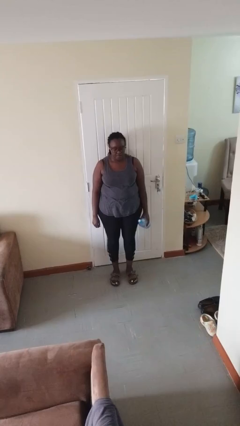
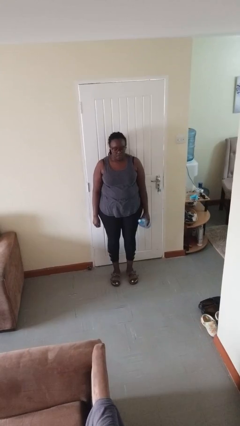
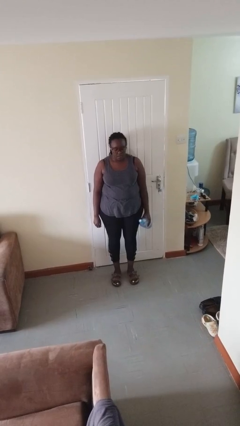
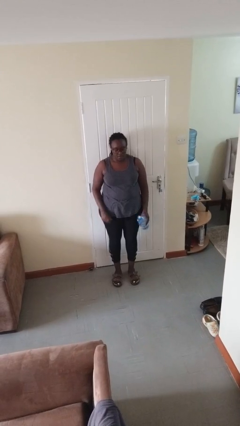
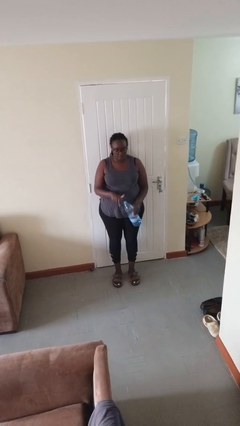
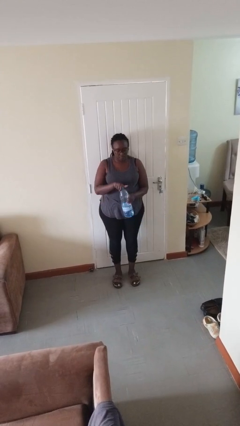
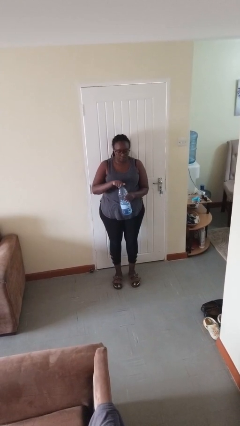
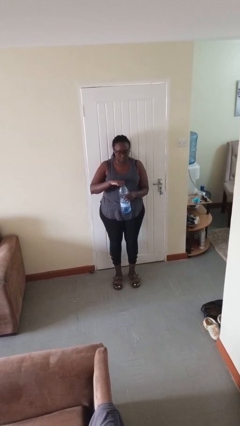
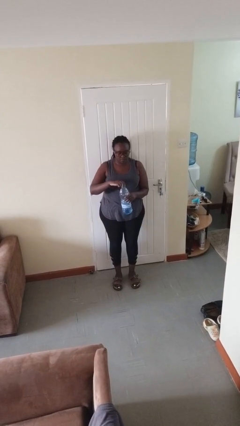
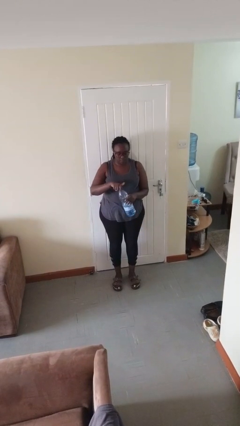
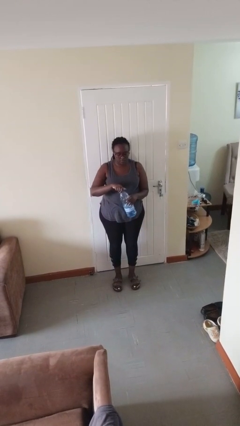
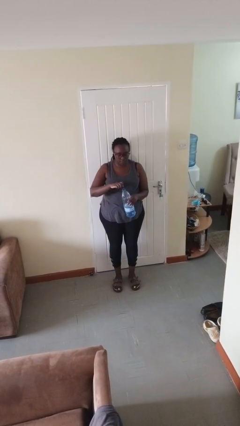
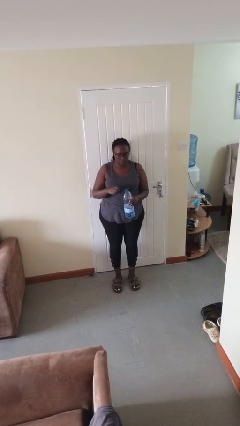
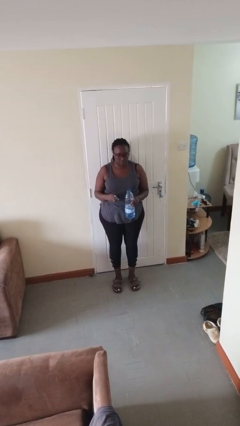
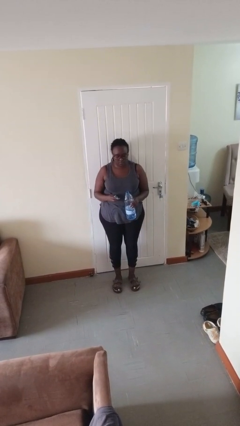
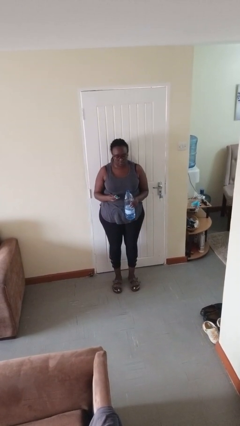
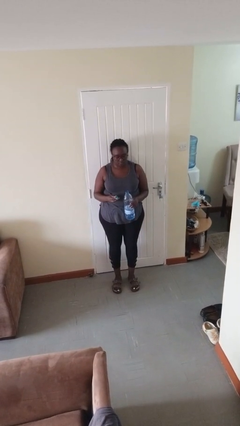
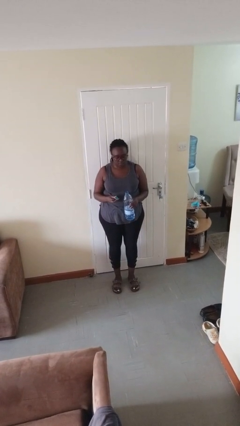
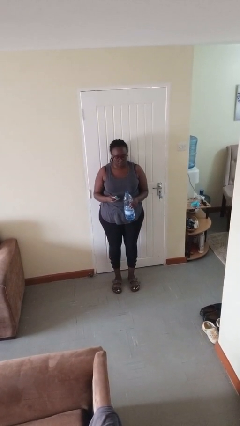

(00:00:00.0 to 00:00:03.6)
person unscrews lid from bottle

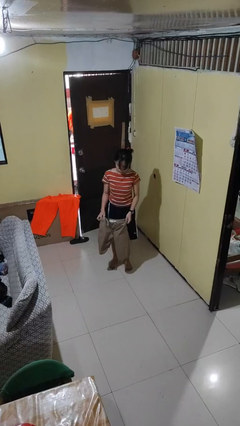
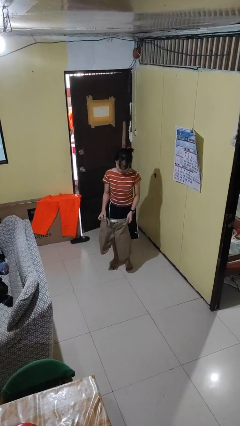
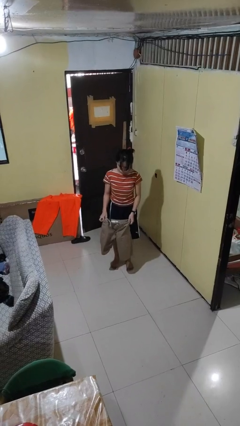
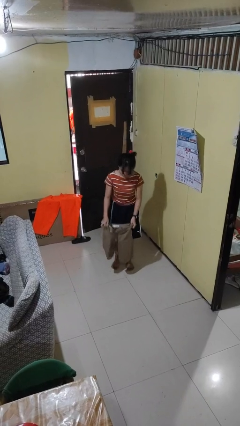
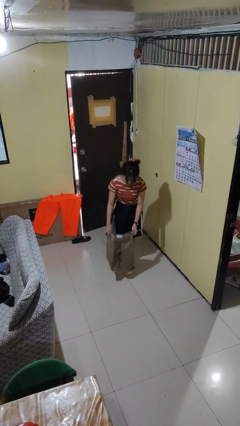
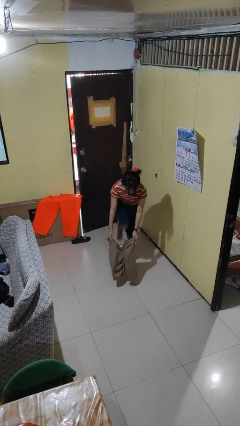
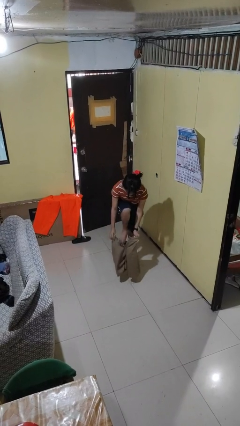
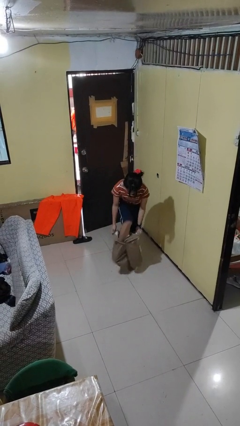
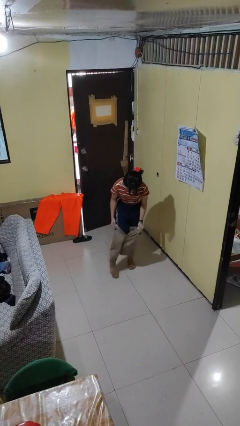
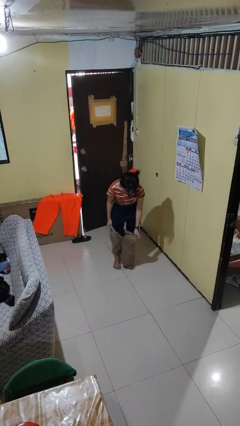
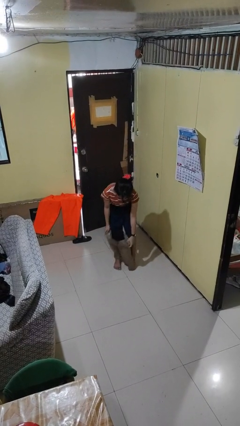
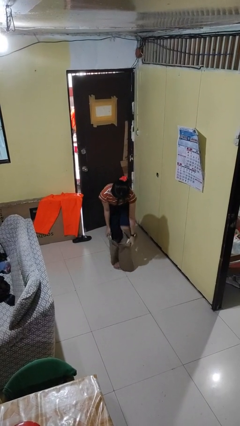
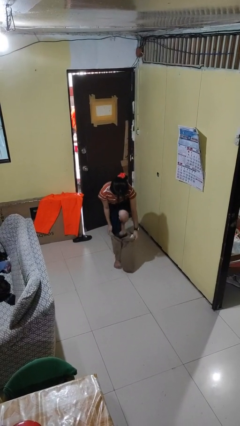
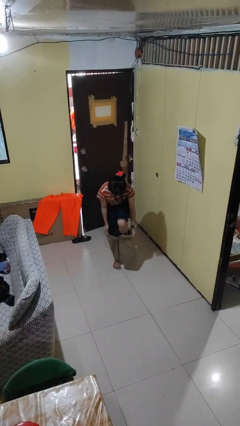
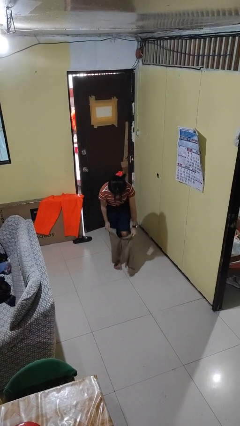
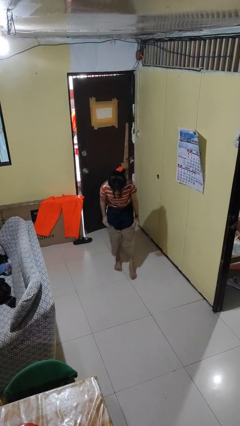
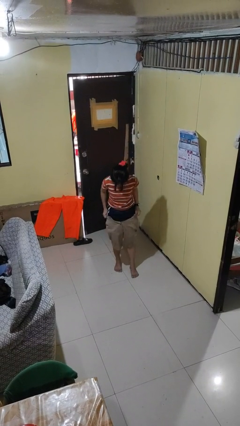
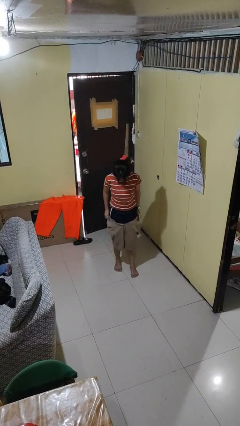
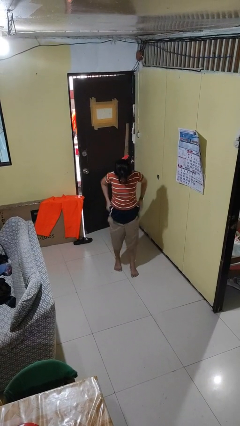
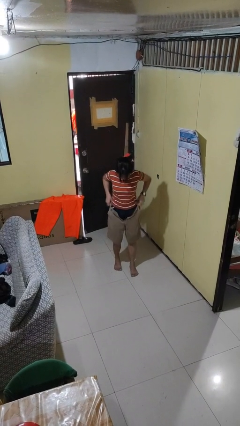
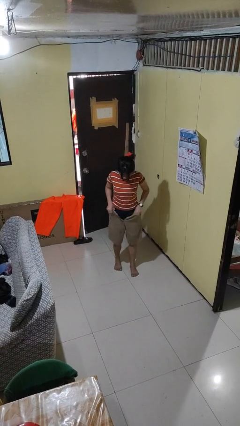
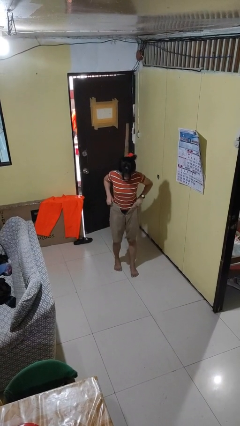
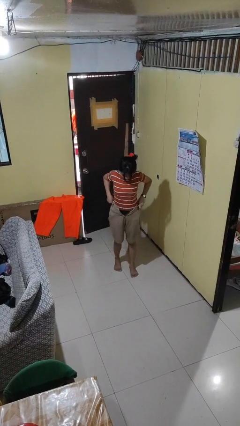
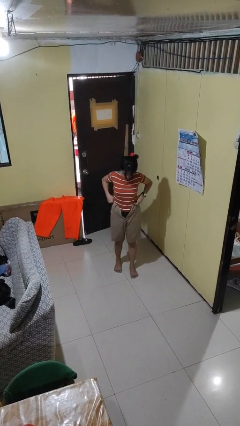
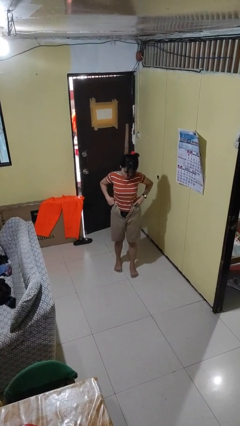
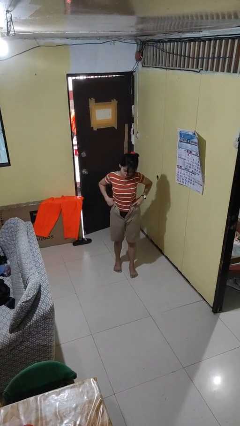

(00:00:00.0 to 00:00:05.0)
person puts on pants

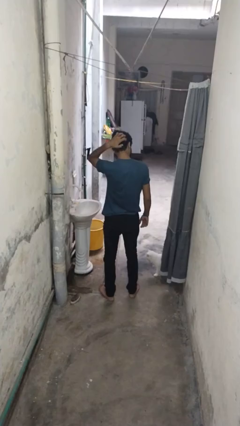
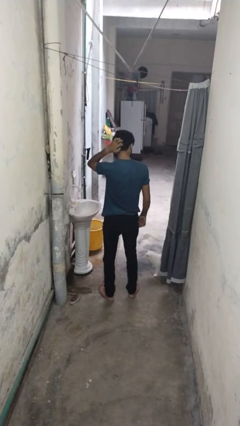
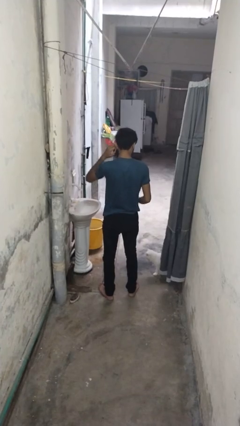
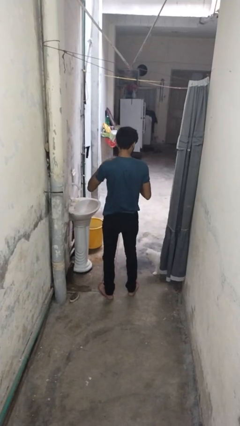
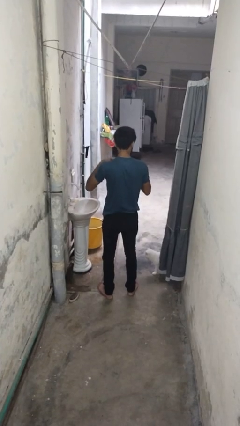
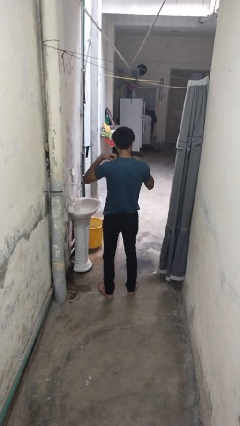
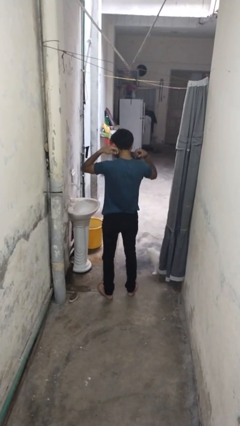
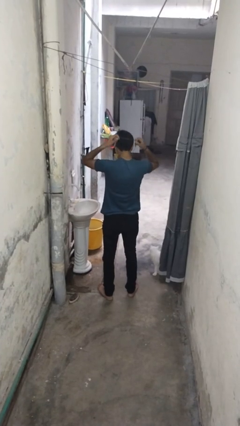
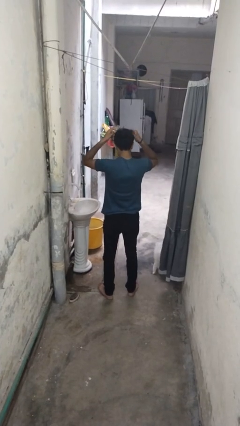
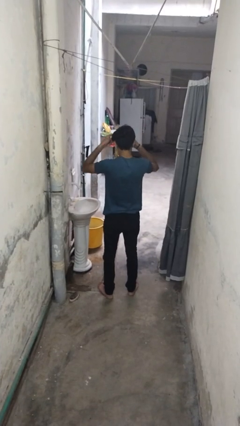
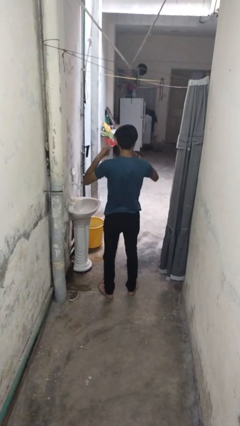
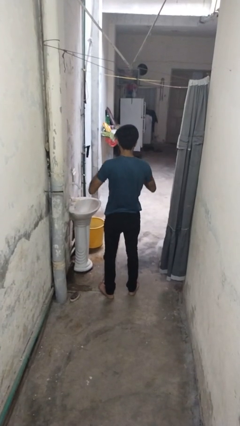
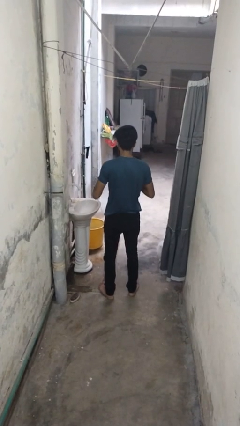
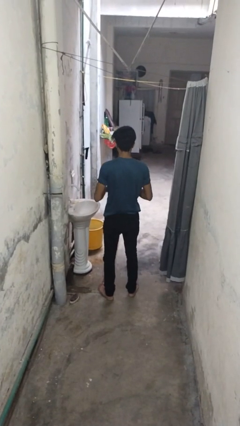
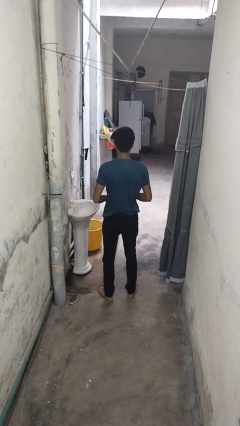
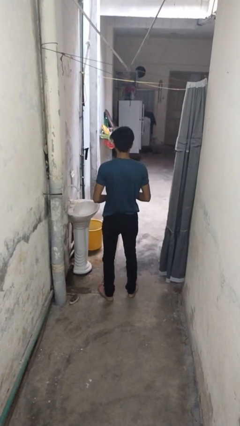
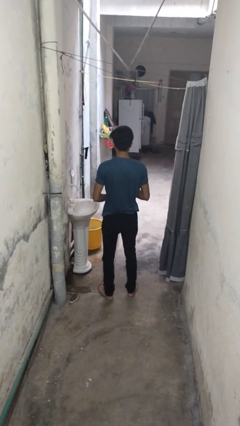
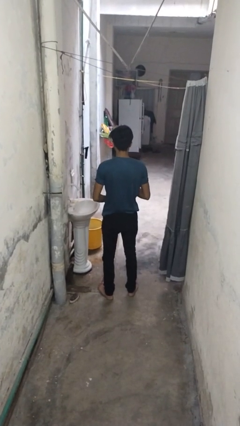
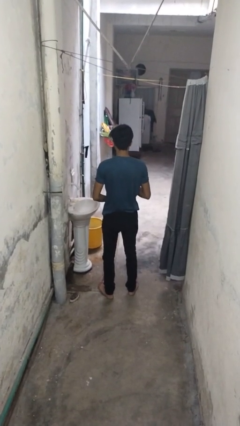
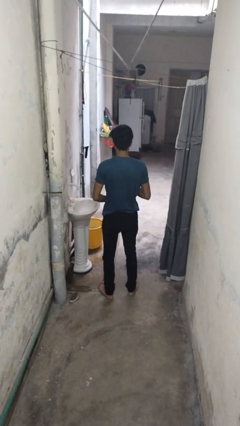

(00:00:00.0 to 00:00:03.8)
person takes off necklace

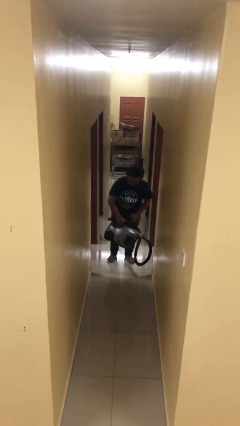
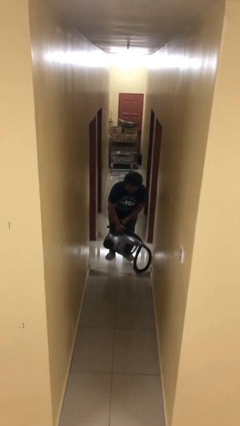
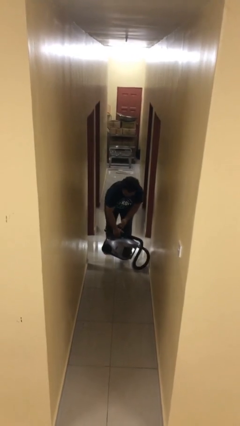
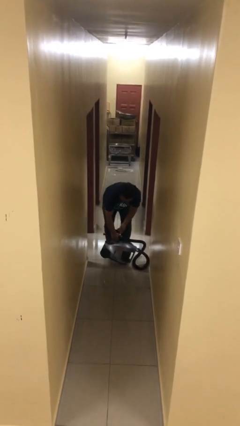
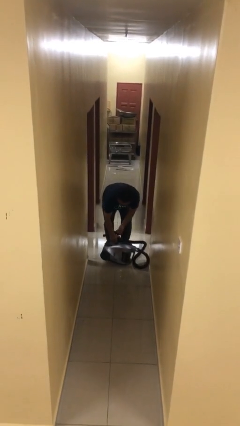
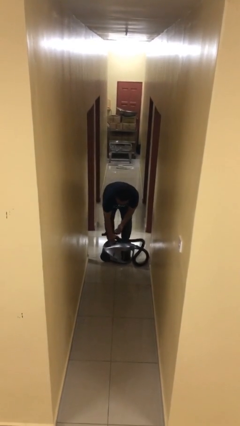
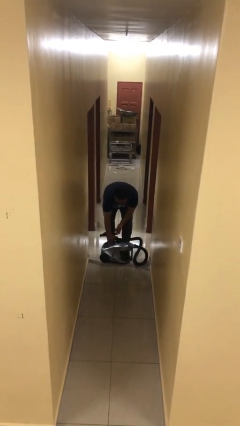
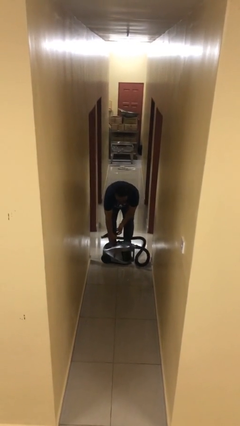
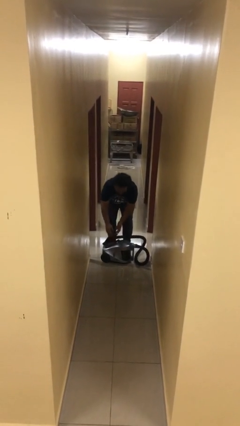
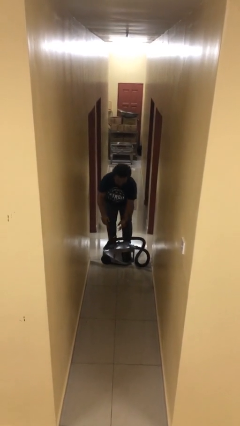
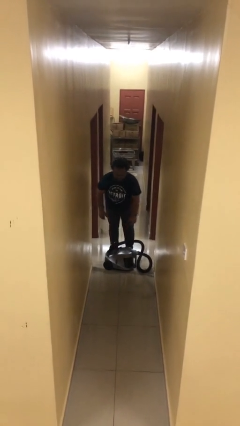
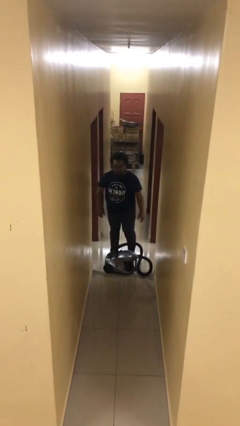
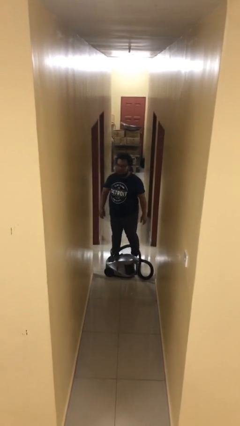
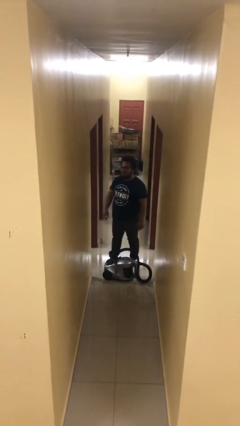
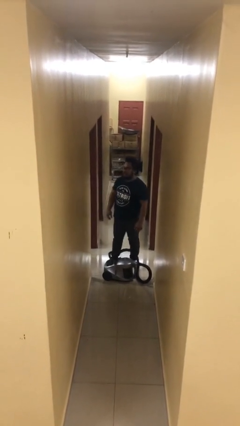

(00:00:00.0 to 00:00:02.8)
person puts down object on floor

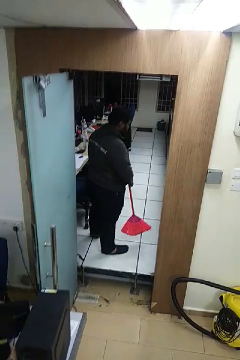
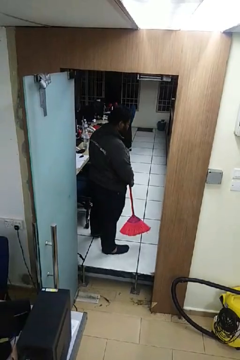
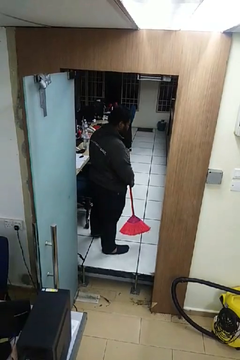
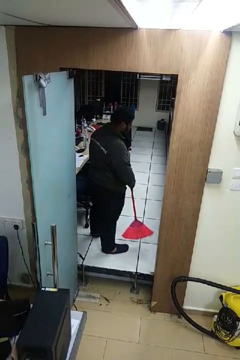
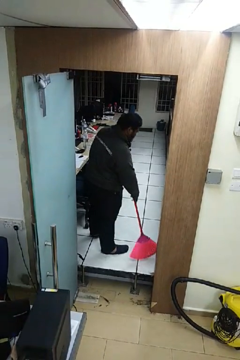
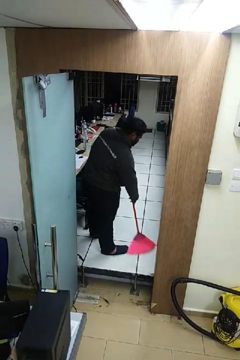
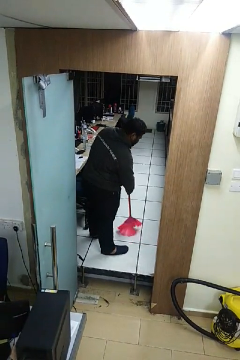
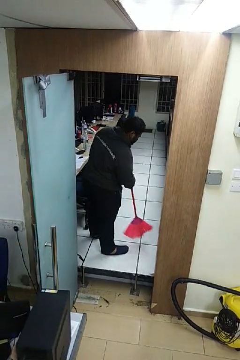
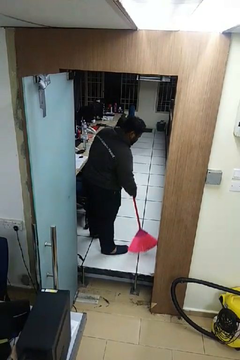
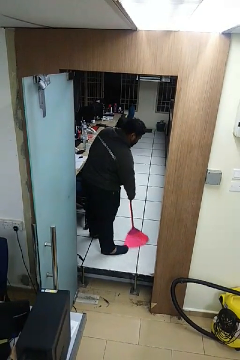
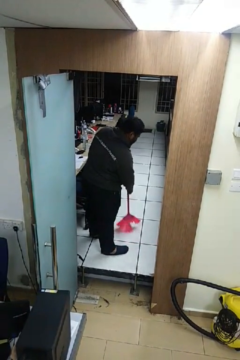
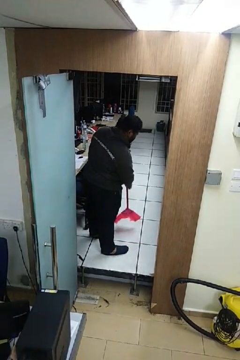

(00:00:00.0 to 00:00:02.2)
person sweeps floor

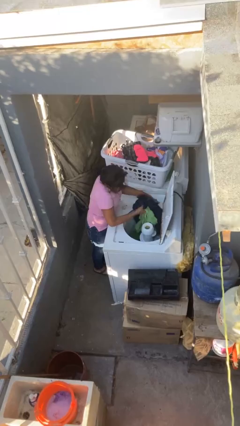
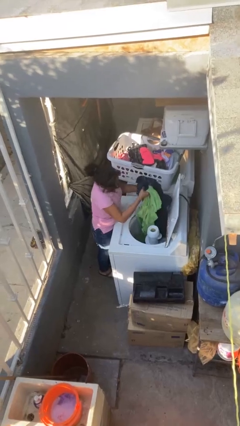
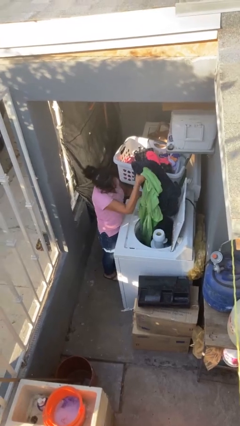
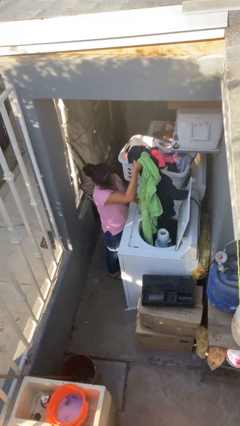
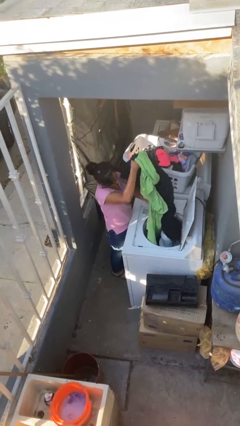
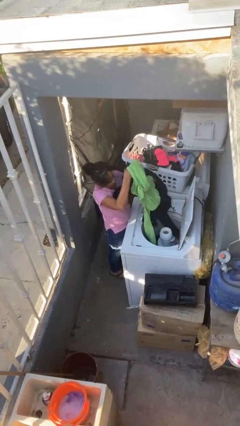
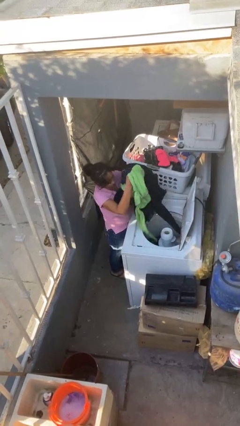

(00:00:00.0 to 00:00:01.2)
person loads clotheswasher
